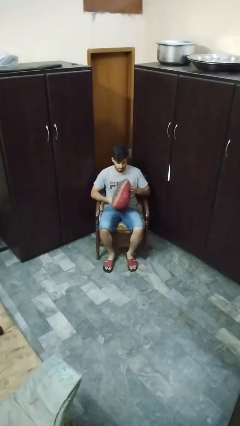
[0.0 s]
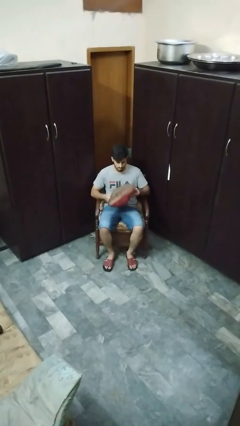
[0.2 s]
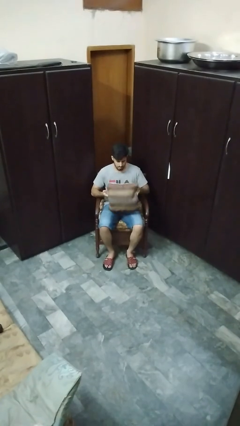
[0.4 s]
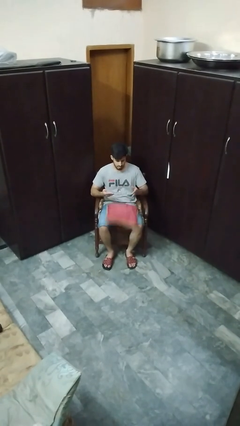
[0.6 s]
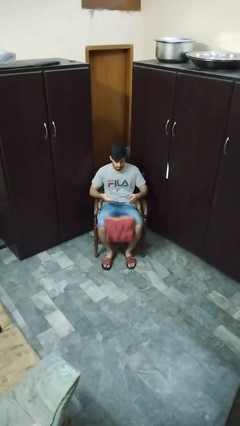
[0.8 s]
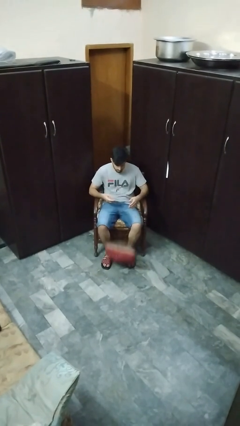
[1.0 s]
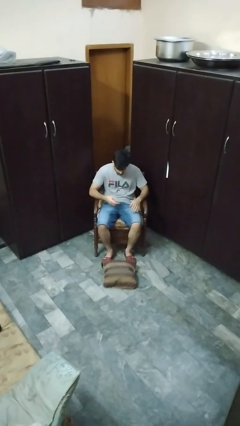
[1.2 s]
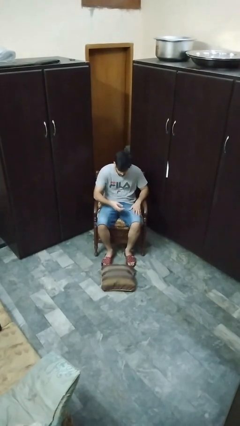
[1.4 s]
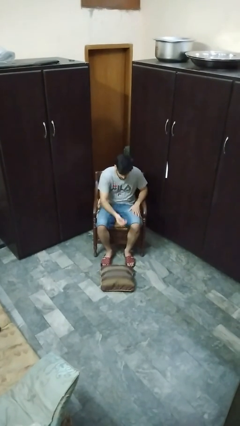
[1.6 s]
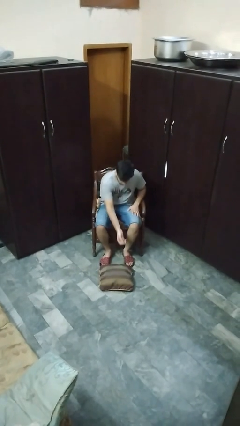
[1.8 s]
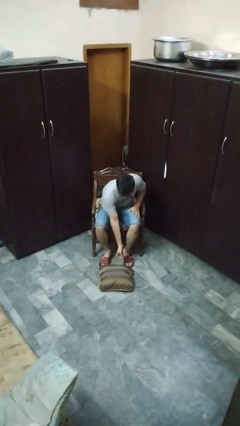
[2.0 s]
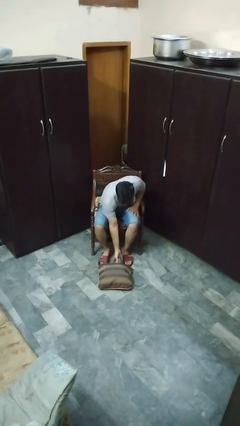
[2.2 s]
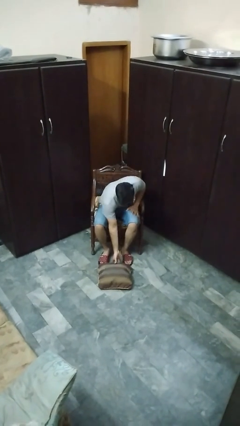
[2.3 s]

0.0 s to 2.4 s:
person drops object

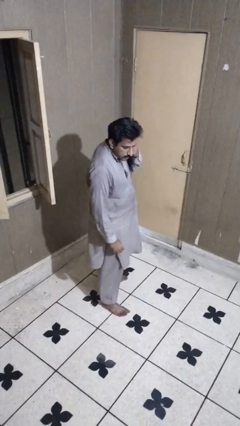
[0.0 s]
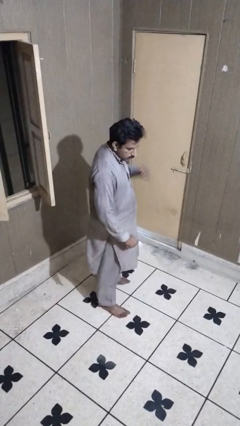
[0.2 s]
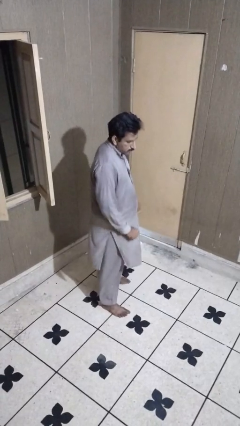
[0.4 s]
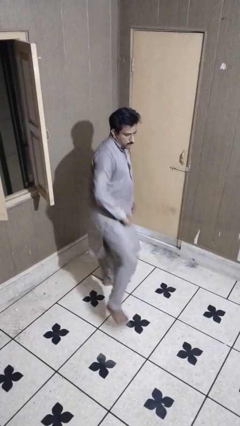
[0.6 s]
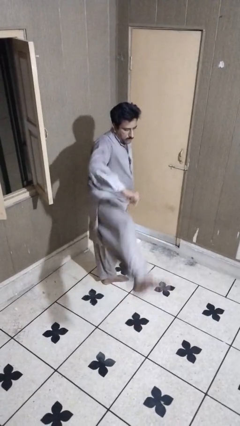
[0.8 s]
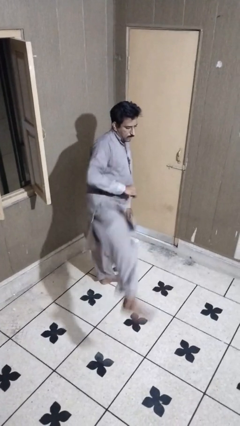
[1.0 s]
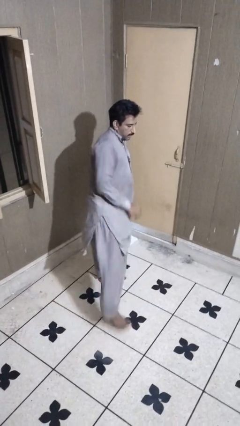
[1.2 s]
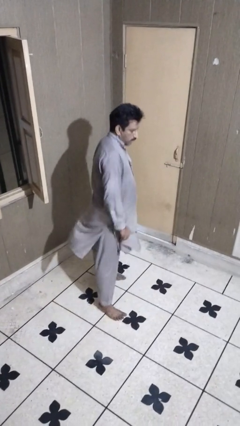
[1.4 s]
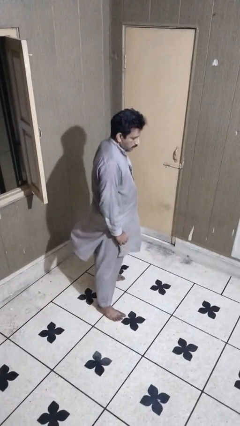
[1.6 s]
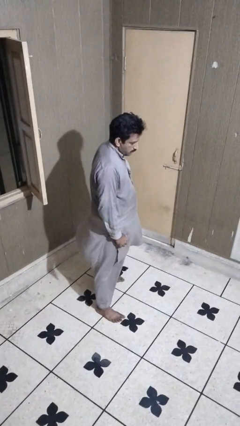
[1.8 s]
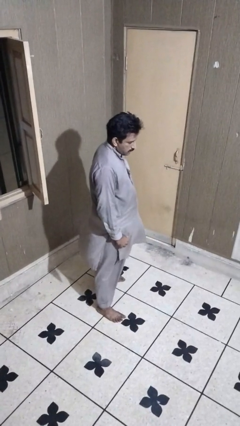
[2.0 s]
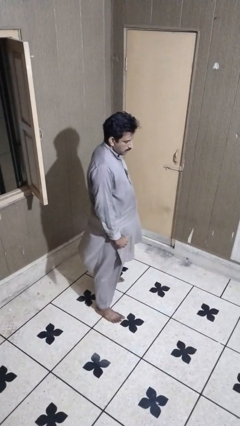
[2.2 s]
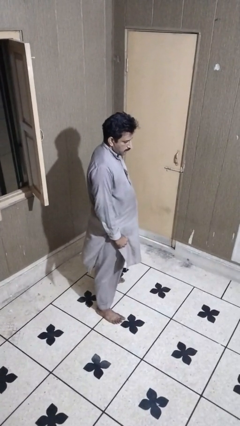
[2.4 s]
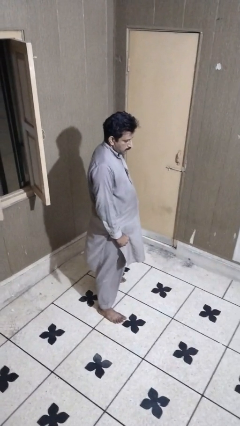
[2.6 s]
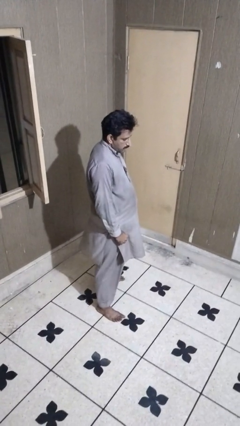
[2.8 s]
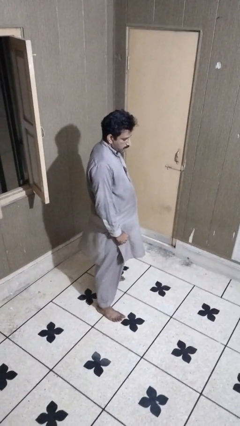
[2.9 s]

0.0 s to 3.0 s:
person karate kicks

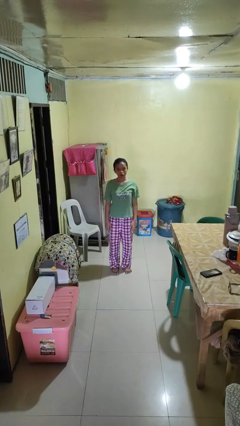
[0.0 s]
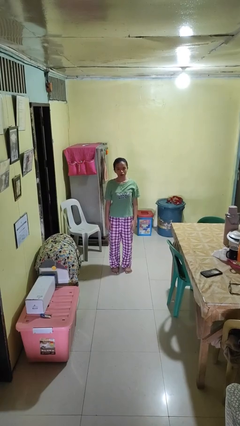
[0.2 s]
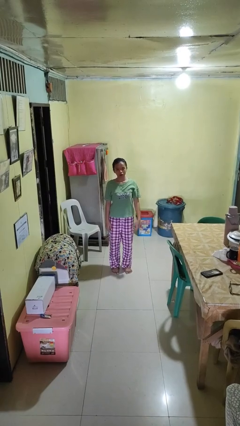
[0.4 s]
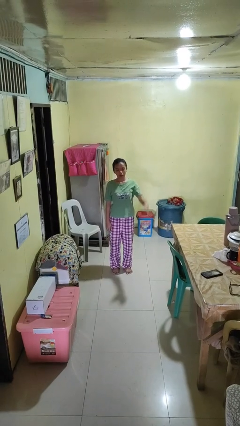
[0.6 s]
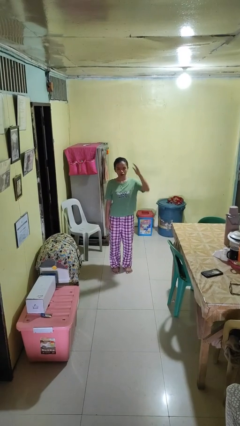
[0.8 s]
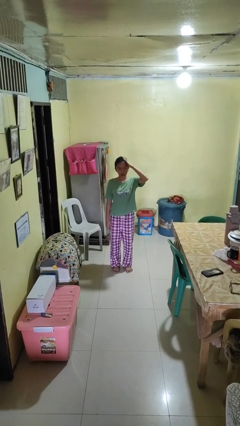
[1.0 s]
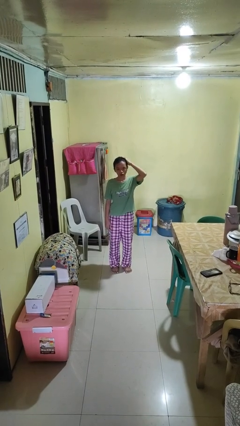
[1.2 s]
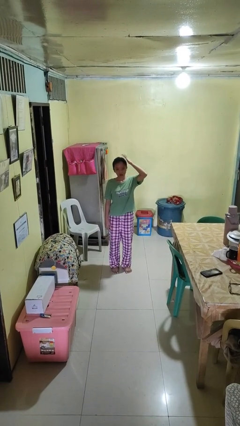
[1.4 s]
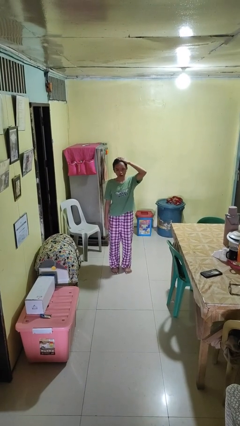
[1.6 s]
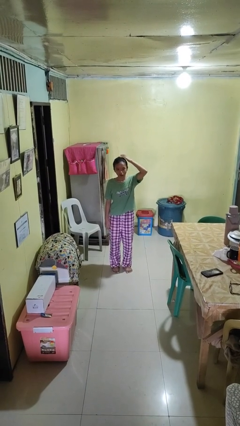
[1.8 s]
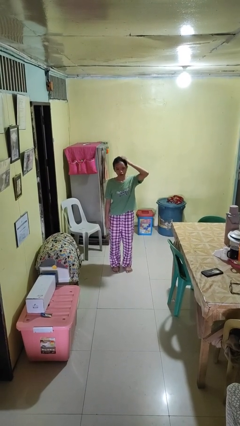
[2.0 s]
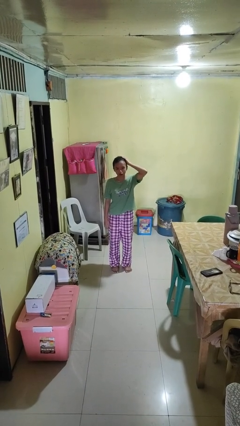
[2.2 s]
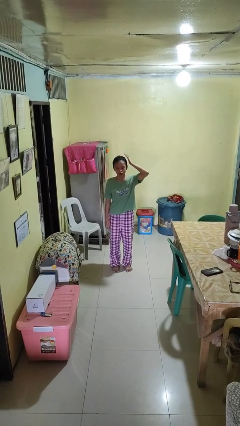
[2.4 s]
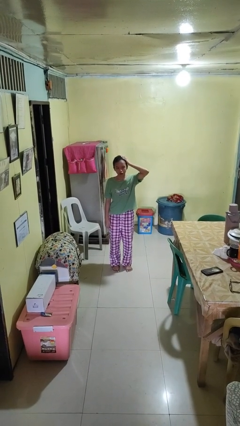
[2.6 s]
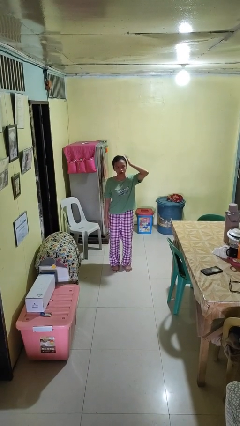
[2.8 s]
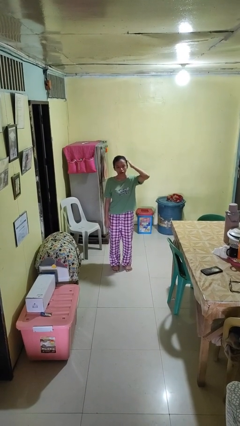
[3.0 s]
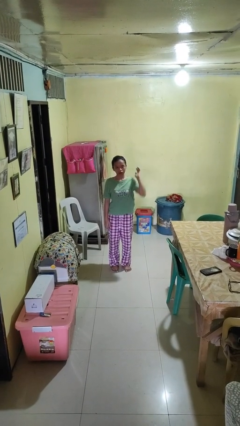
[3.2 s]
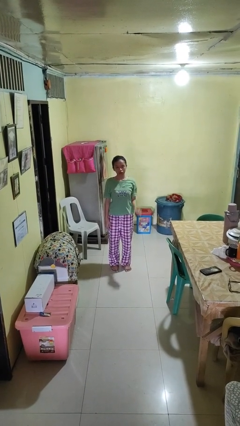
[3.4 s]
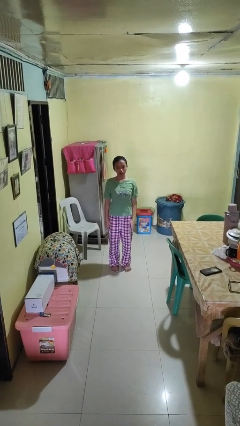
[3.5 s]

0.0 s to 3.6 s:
person pats head

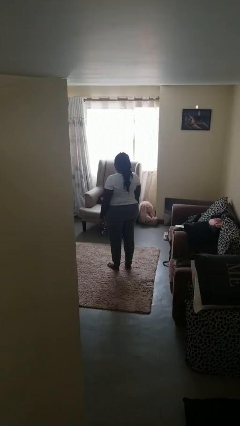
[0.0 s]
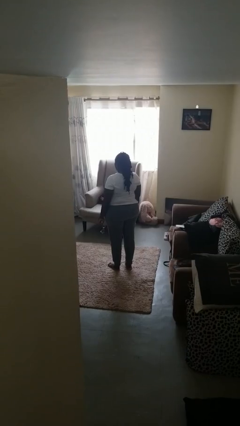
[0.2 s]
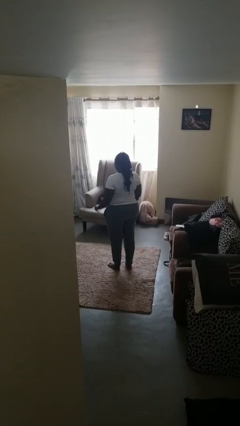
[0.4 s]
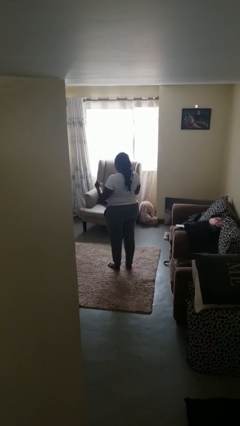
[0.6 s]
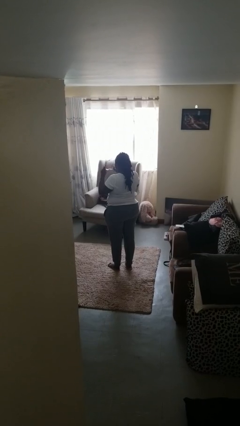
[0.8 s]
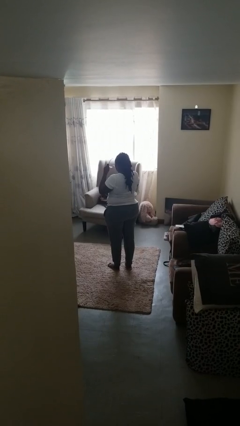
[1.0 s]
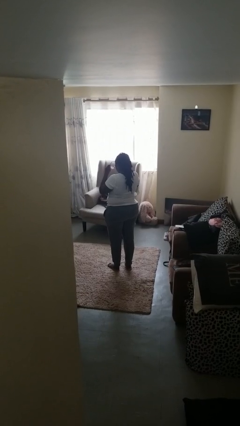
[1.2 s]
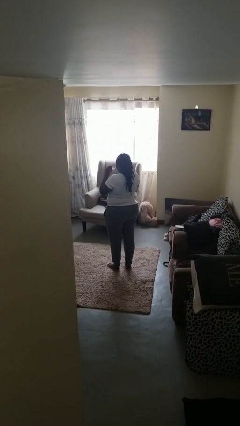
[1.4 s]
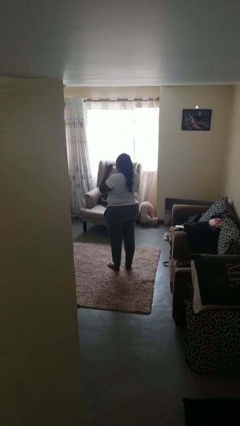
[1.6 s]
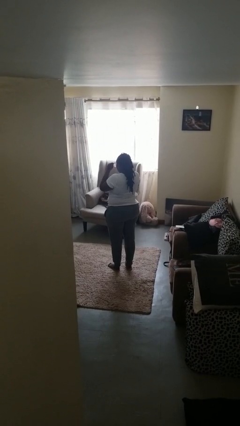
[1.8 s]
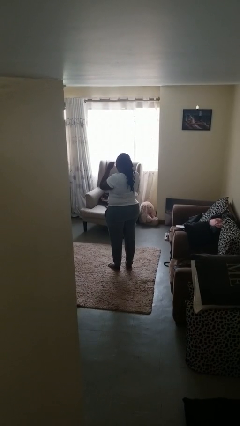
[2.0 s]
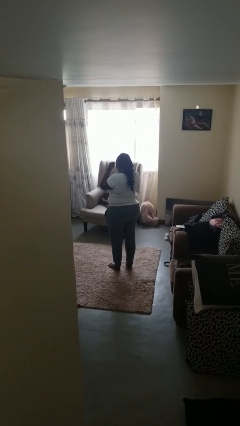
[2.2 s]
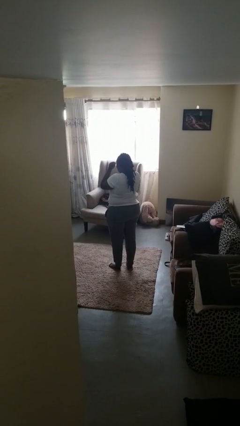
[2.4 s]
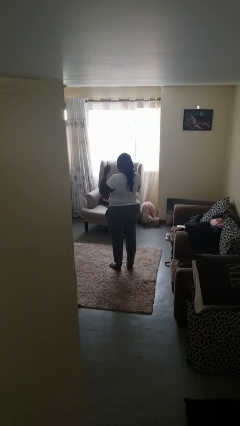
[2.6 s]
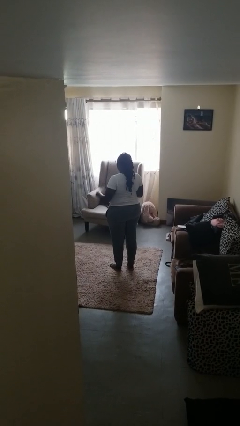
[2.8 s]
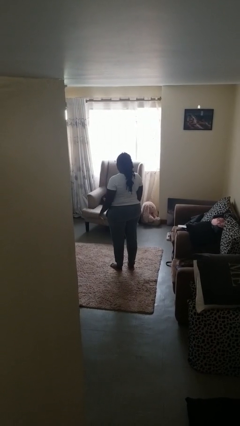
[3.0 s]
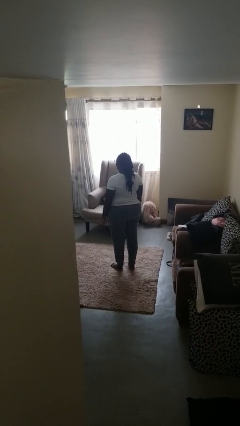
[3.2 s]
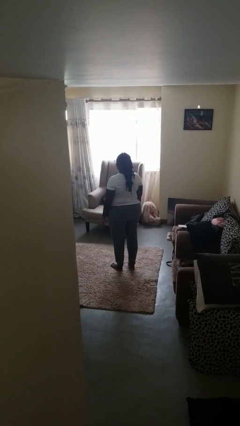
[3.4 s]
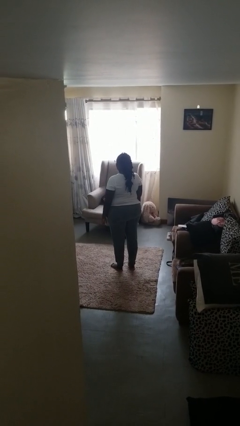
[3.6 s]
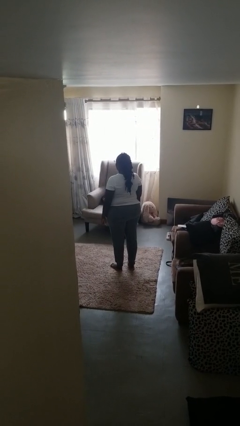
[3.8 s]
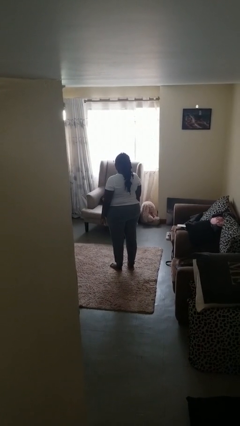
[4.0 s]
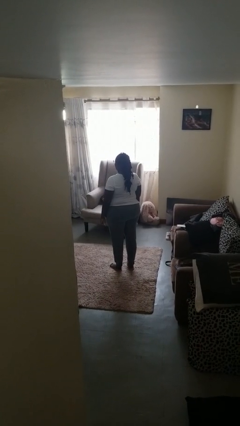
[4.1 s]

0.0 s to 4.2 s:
person puts on glasses

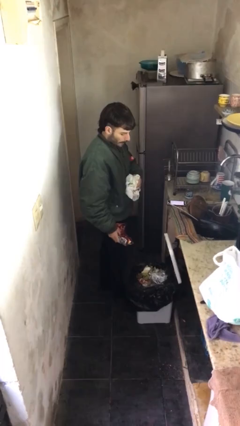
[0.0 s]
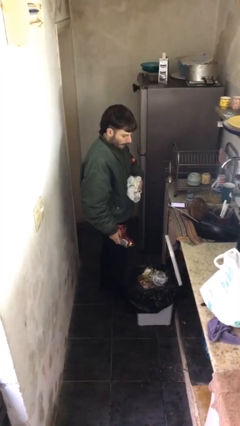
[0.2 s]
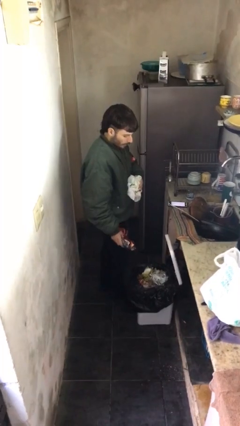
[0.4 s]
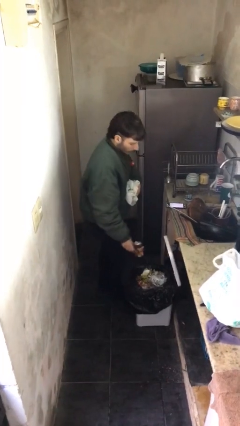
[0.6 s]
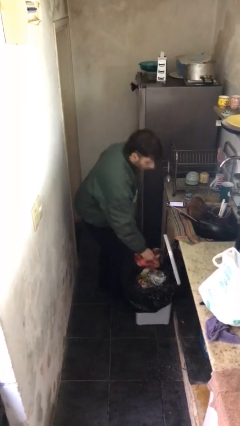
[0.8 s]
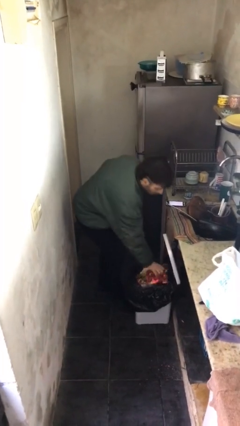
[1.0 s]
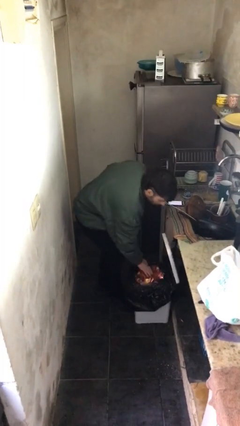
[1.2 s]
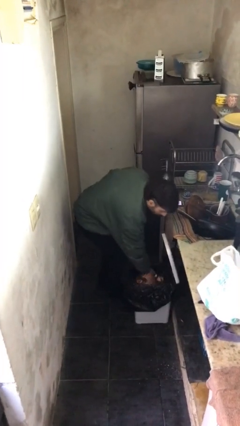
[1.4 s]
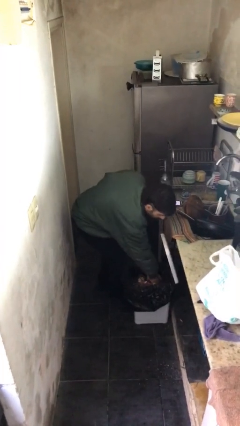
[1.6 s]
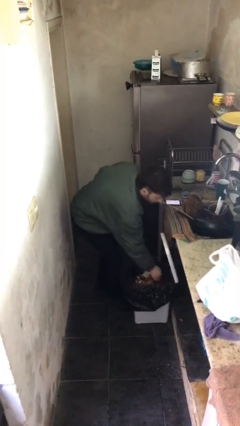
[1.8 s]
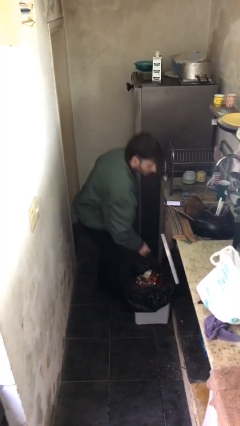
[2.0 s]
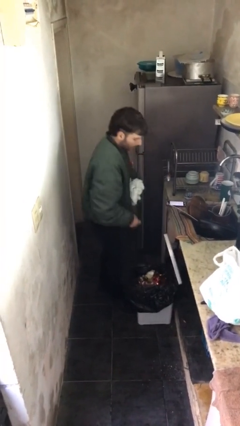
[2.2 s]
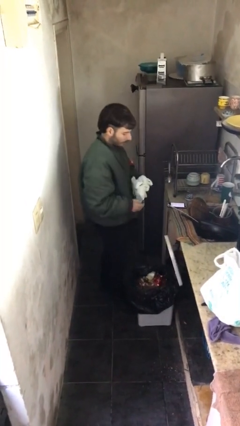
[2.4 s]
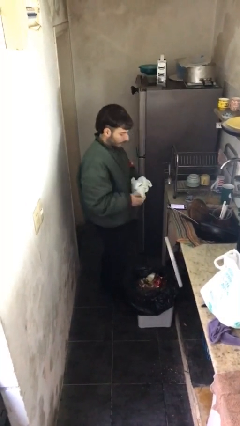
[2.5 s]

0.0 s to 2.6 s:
person discards trash

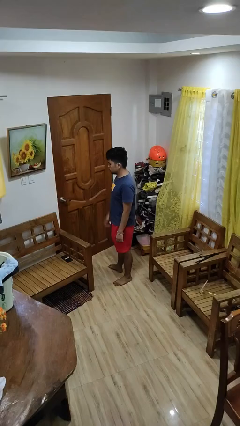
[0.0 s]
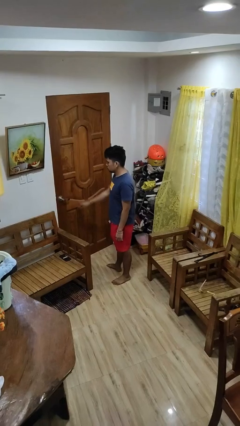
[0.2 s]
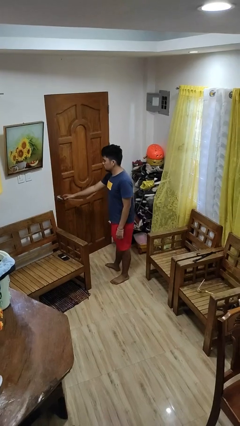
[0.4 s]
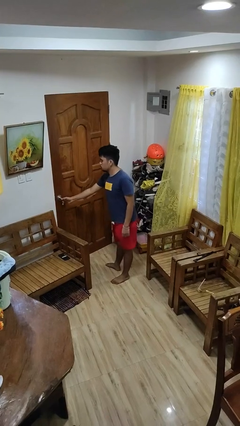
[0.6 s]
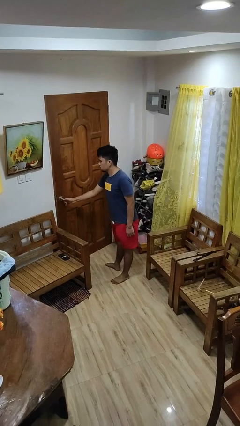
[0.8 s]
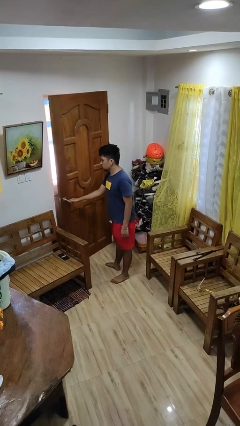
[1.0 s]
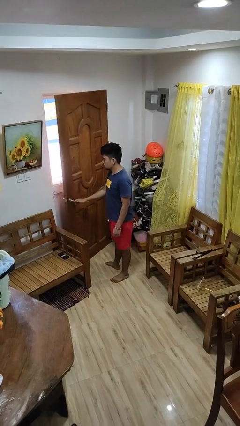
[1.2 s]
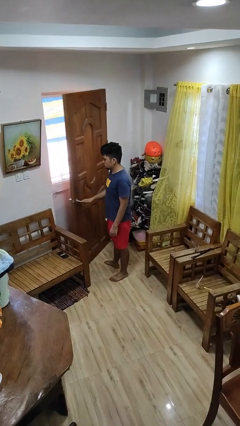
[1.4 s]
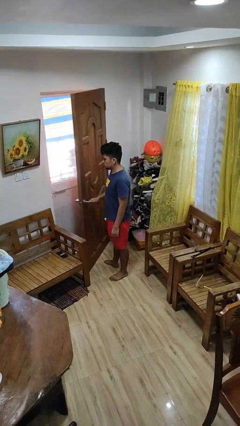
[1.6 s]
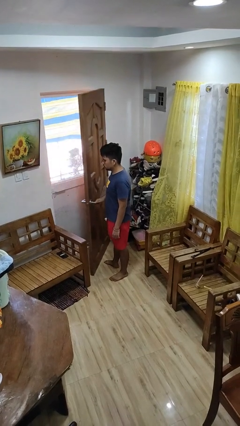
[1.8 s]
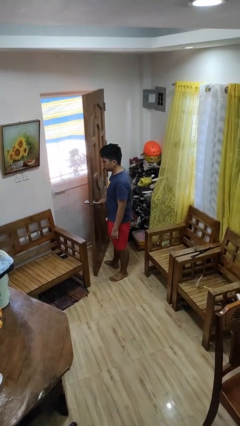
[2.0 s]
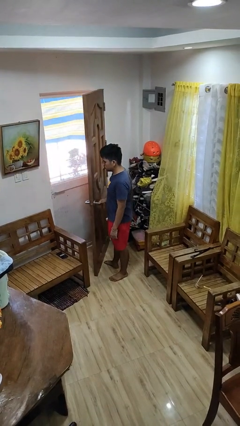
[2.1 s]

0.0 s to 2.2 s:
person opens facility door
